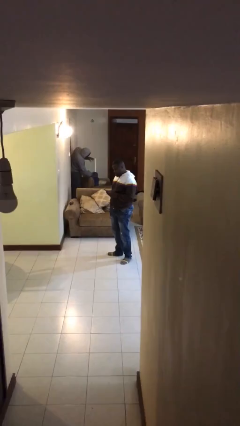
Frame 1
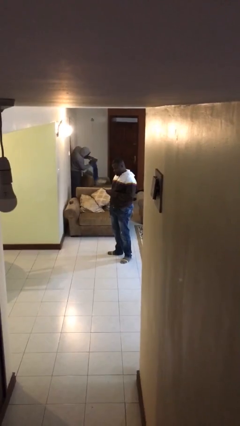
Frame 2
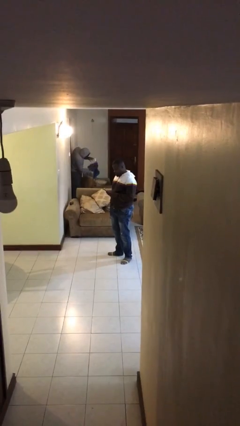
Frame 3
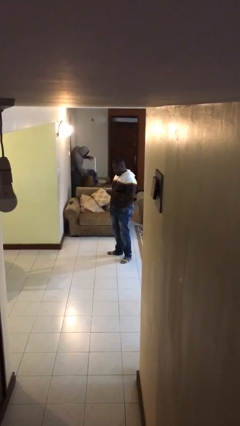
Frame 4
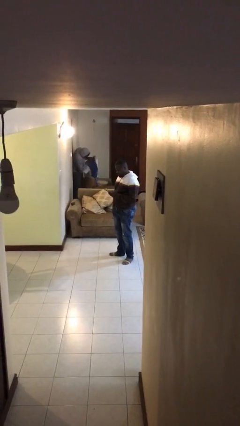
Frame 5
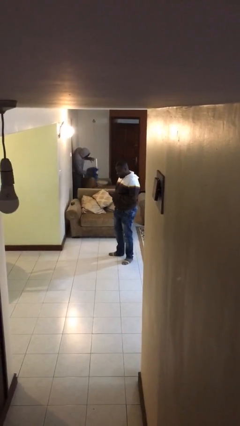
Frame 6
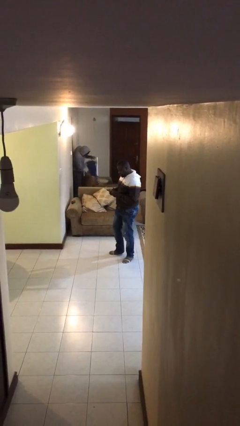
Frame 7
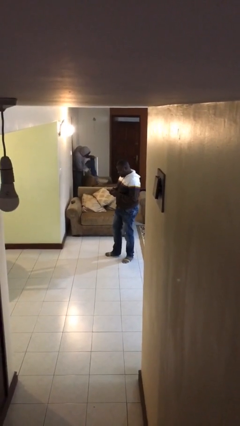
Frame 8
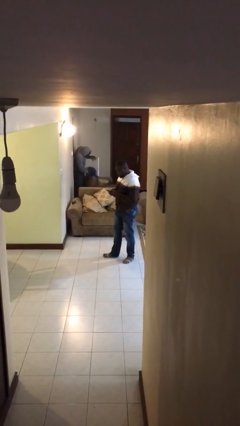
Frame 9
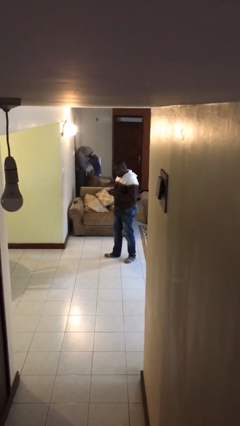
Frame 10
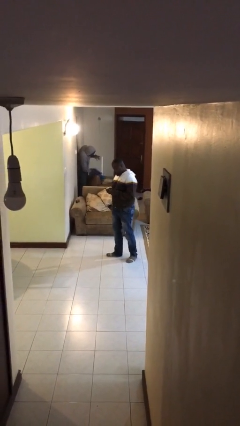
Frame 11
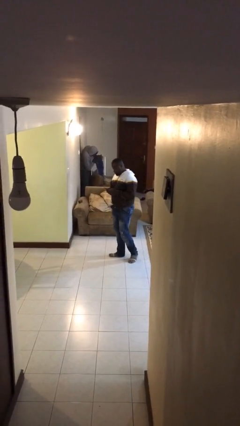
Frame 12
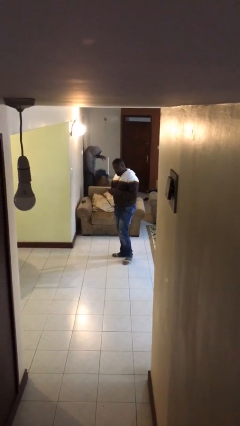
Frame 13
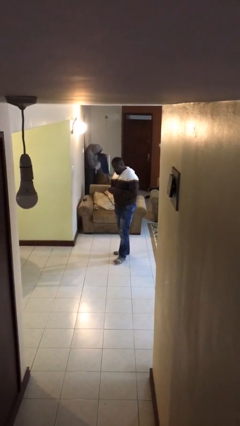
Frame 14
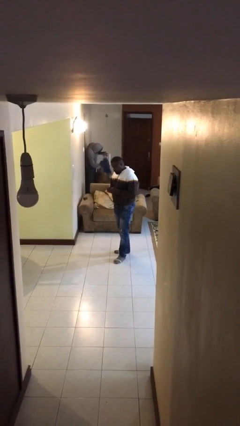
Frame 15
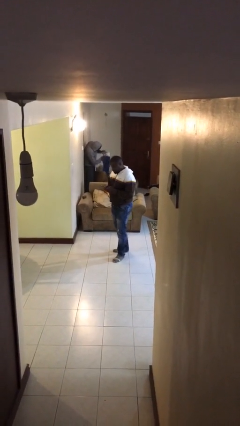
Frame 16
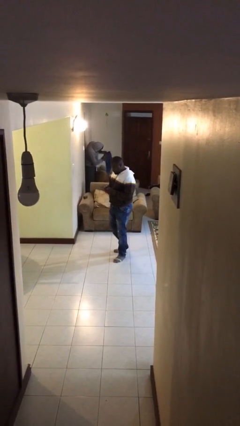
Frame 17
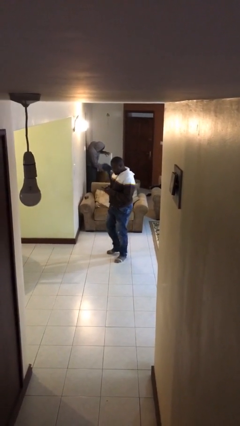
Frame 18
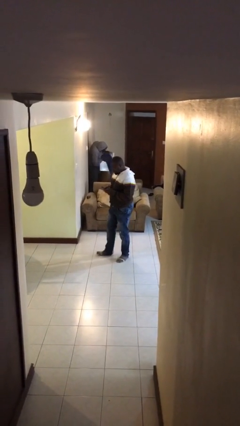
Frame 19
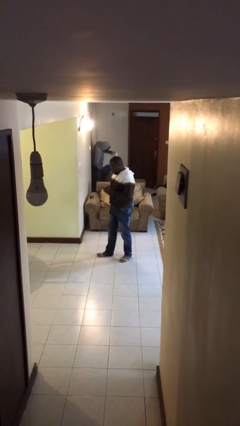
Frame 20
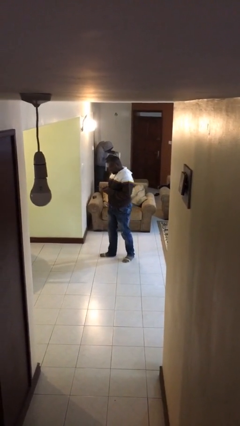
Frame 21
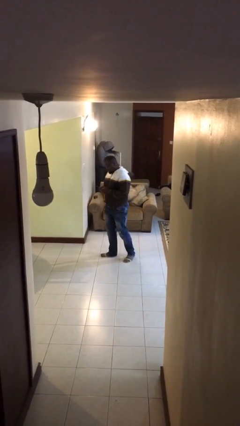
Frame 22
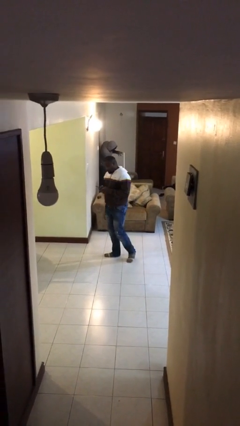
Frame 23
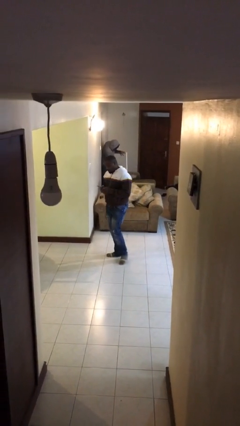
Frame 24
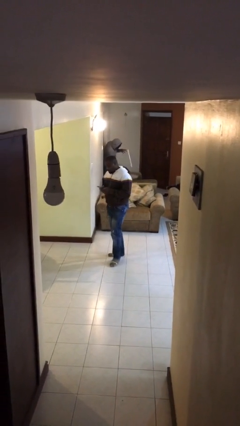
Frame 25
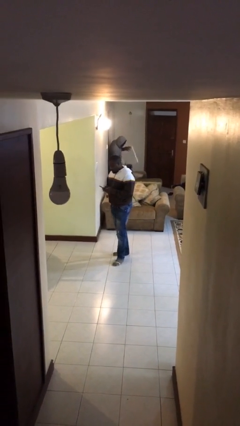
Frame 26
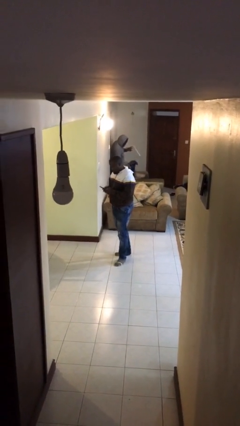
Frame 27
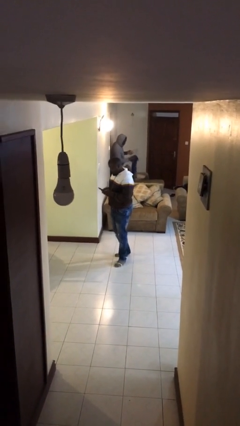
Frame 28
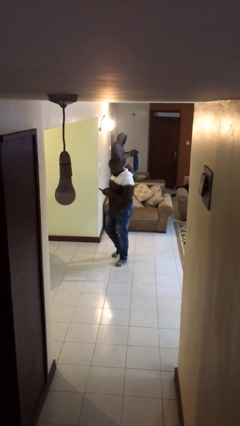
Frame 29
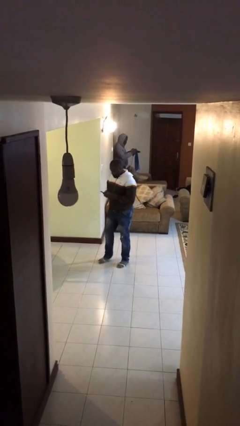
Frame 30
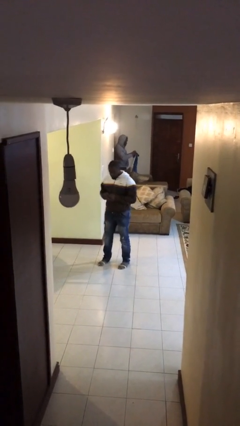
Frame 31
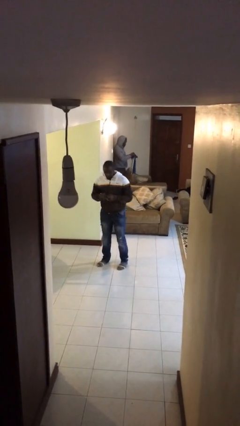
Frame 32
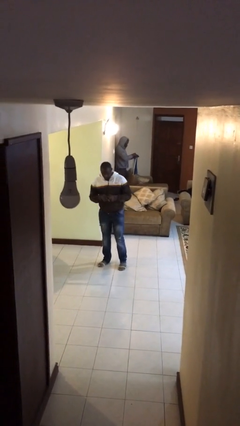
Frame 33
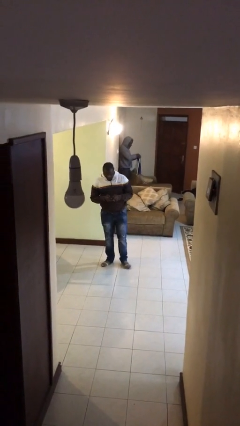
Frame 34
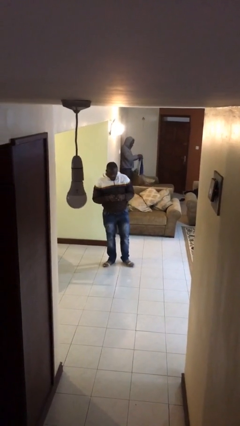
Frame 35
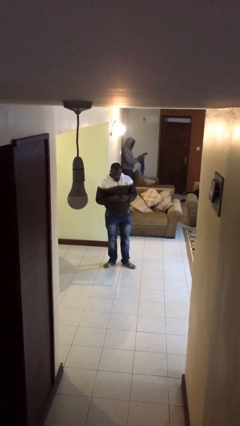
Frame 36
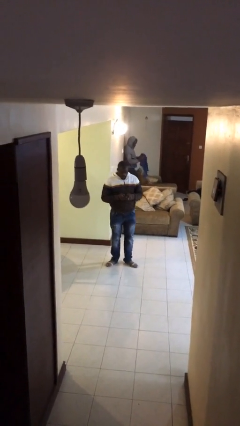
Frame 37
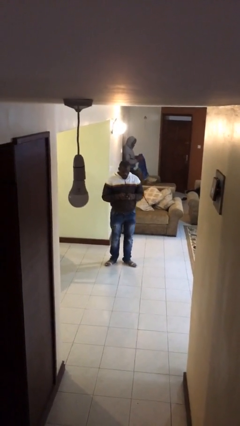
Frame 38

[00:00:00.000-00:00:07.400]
person texts on phone

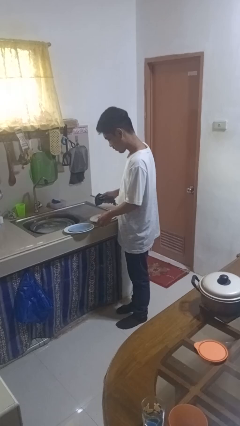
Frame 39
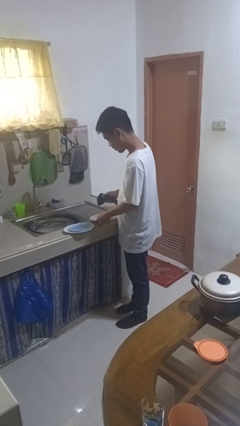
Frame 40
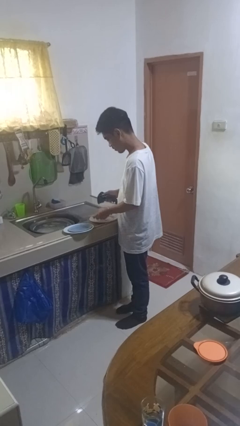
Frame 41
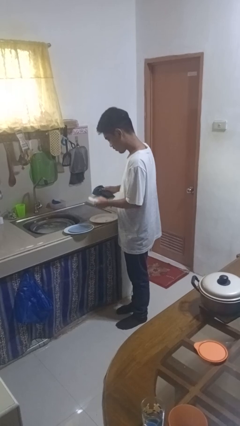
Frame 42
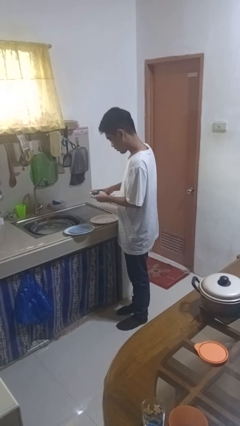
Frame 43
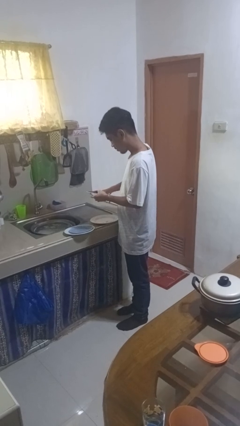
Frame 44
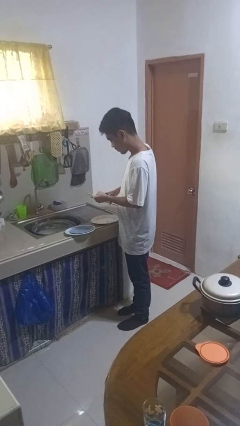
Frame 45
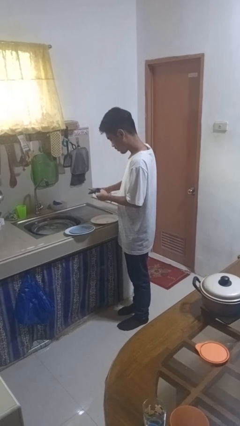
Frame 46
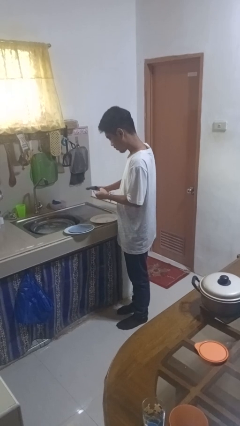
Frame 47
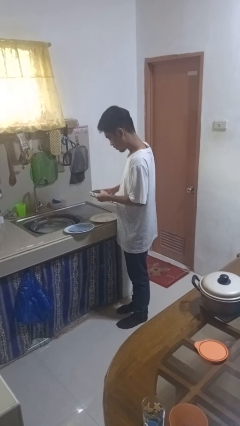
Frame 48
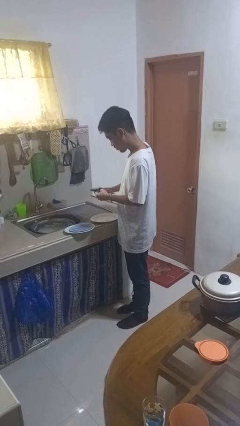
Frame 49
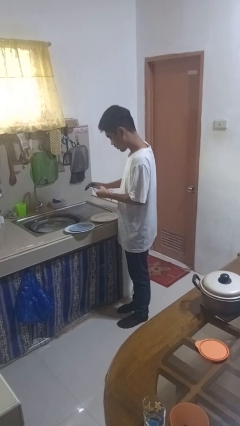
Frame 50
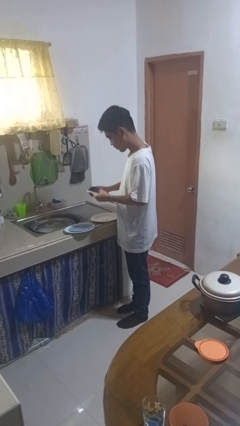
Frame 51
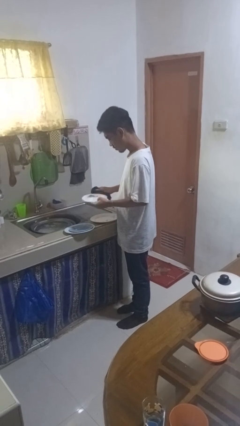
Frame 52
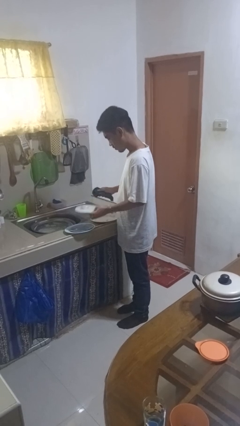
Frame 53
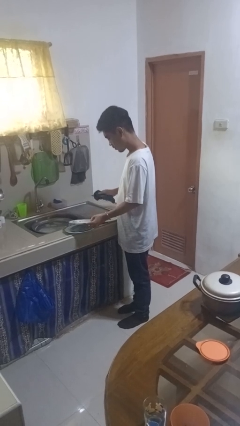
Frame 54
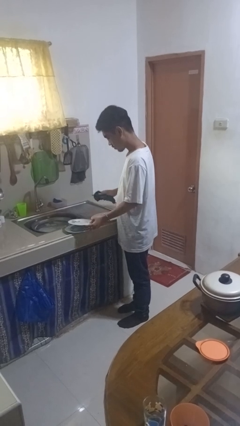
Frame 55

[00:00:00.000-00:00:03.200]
person dries dish

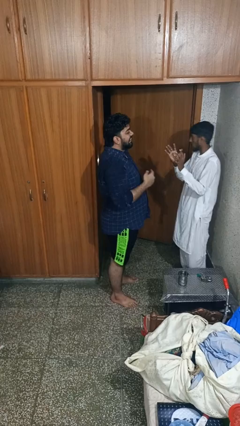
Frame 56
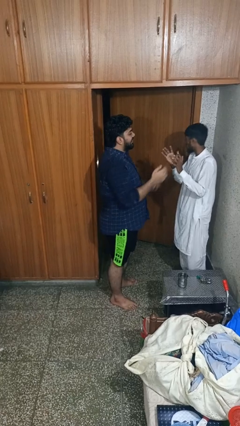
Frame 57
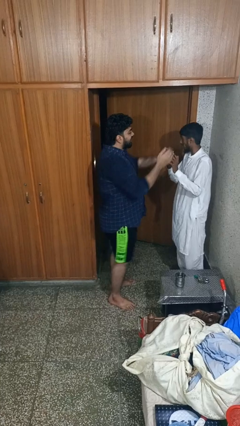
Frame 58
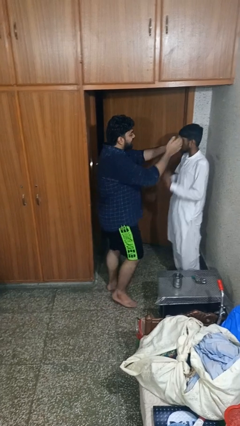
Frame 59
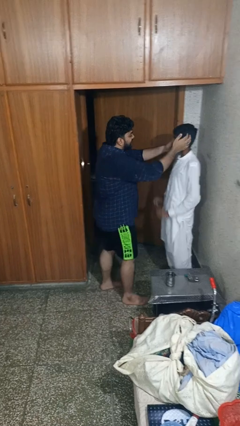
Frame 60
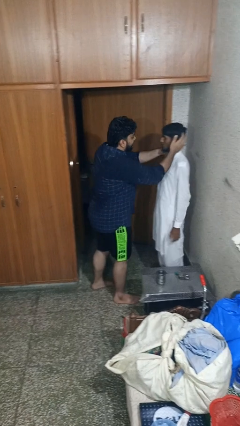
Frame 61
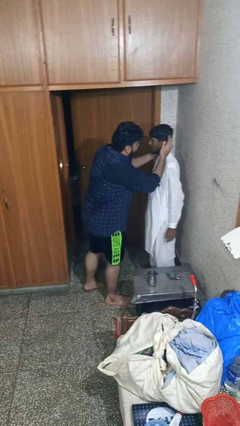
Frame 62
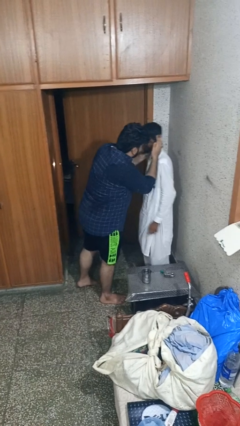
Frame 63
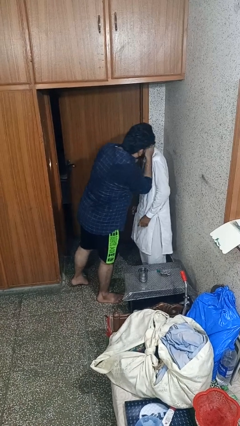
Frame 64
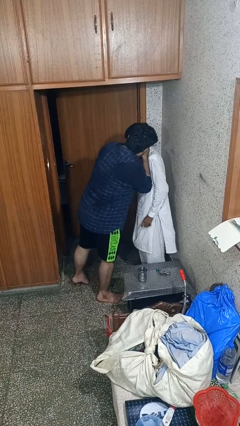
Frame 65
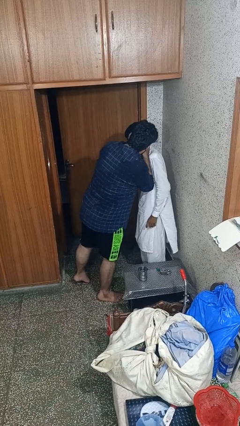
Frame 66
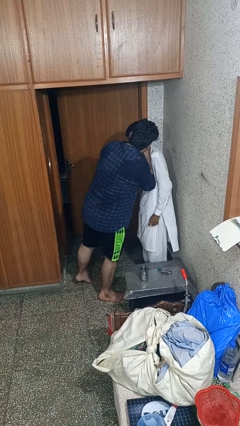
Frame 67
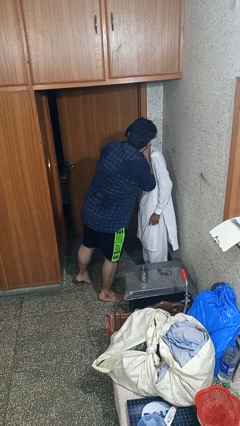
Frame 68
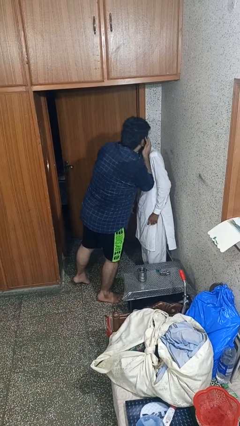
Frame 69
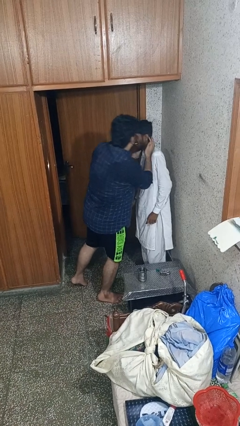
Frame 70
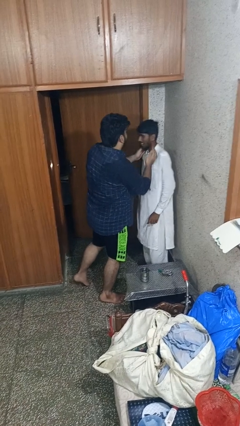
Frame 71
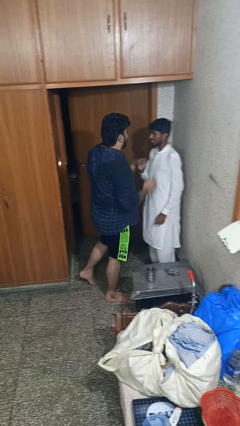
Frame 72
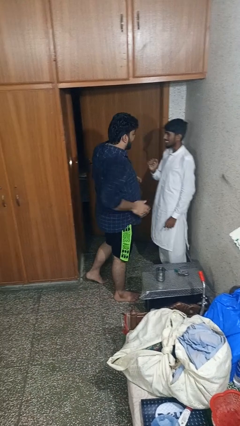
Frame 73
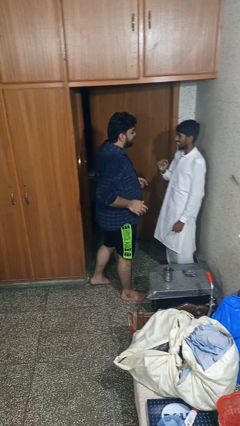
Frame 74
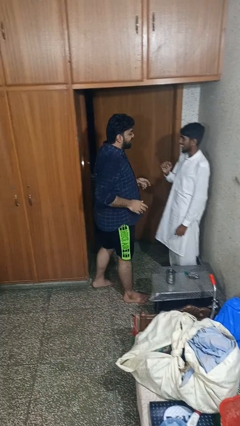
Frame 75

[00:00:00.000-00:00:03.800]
person kisses cheek of person

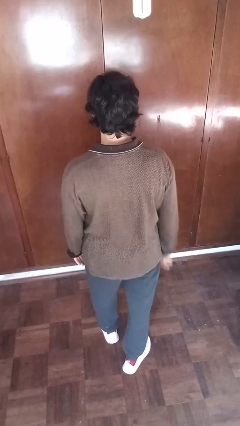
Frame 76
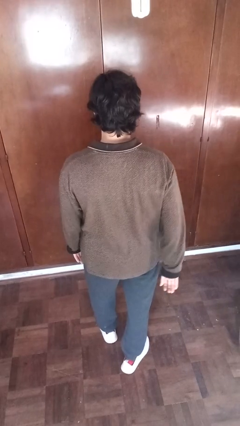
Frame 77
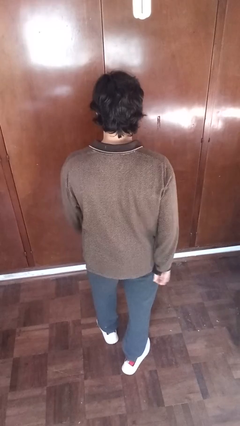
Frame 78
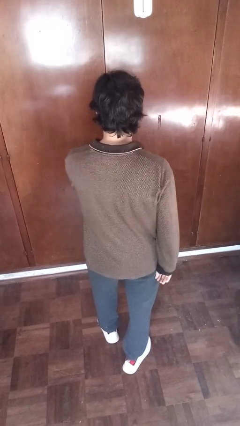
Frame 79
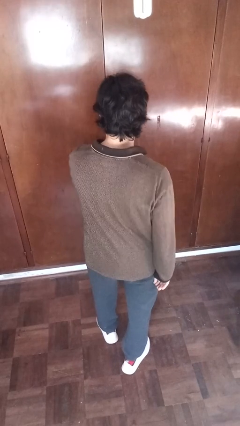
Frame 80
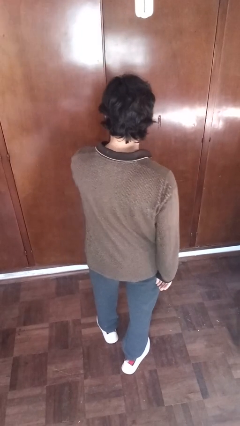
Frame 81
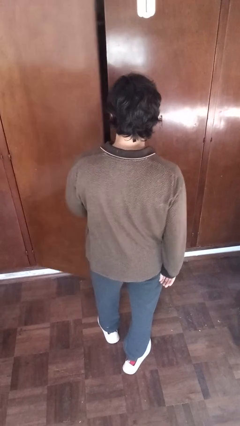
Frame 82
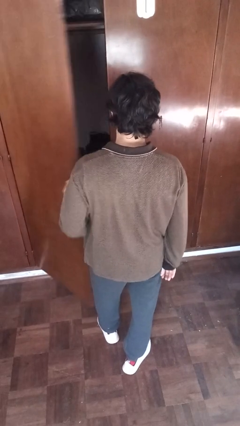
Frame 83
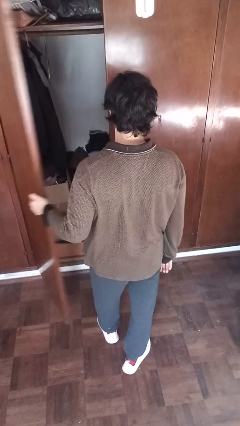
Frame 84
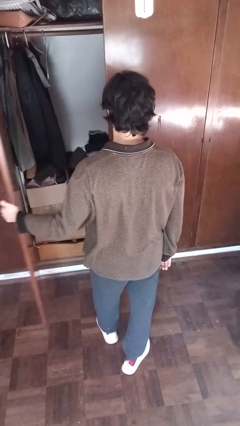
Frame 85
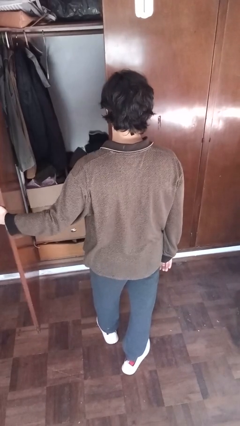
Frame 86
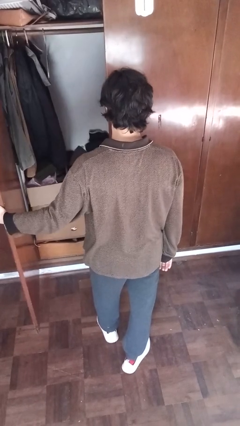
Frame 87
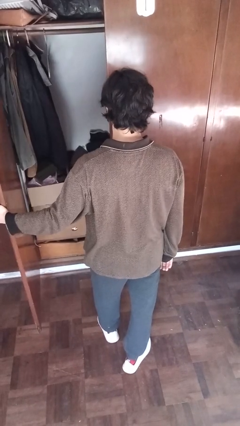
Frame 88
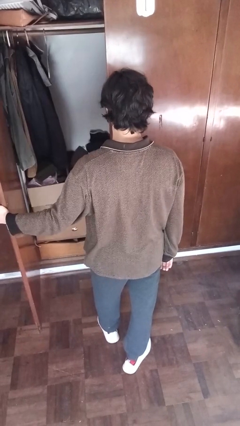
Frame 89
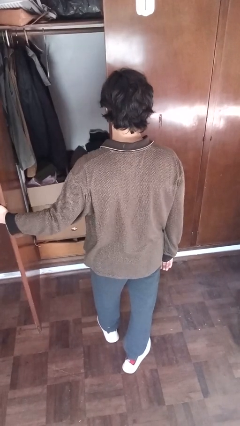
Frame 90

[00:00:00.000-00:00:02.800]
person opens closet door

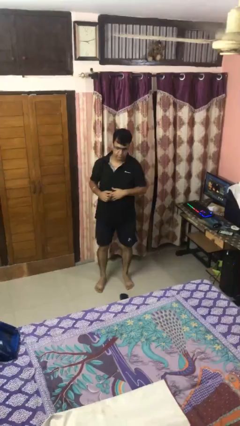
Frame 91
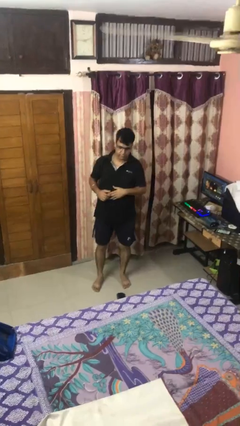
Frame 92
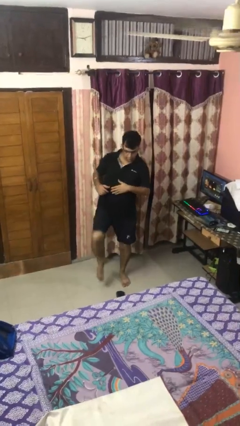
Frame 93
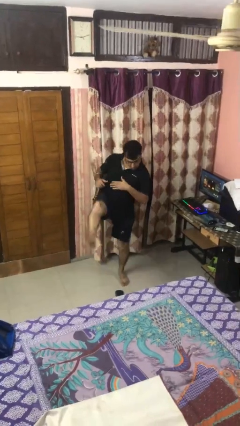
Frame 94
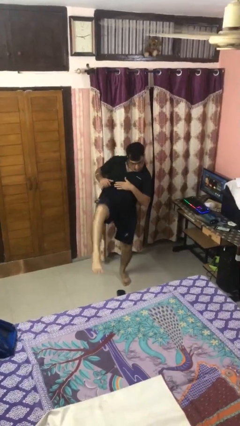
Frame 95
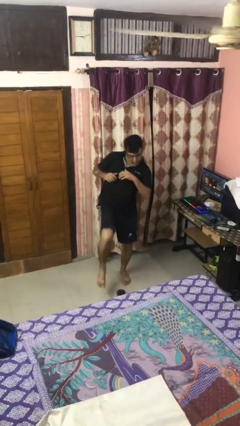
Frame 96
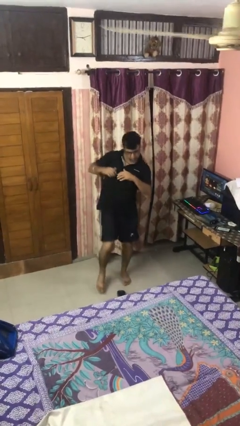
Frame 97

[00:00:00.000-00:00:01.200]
person karate kicks
